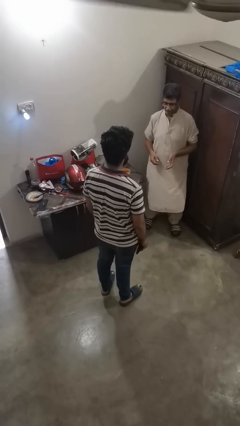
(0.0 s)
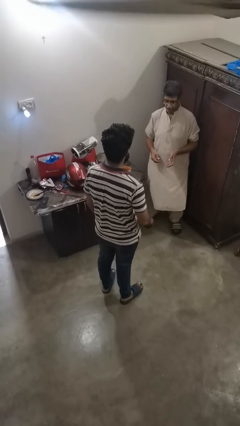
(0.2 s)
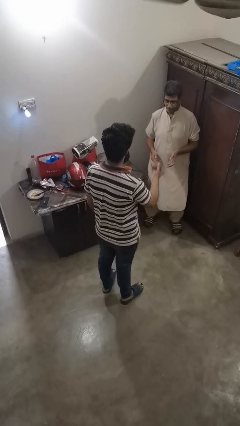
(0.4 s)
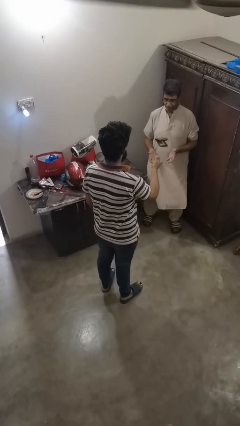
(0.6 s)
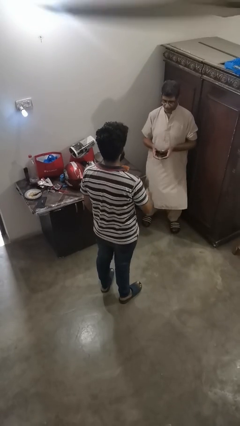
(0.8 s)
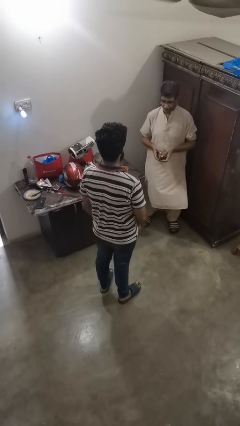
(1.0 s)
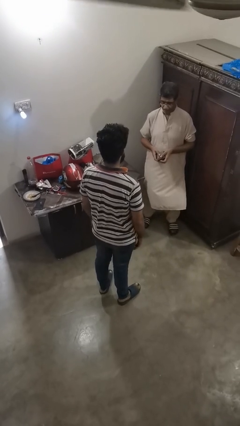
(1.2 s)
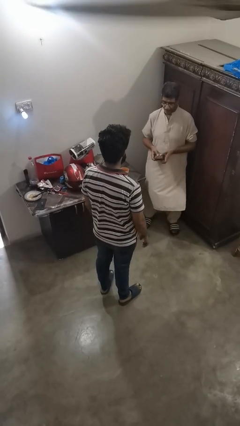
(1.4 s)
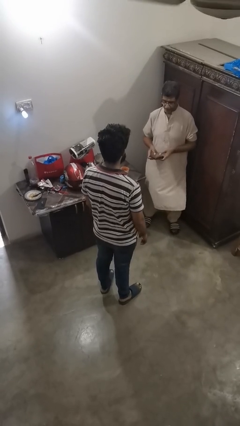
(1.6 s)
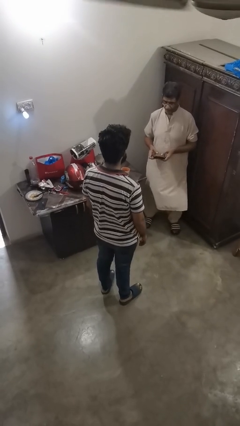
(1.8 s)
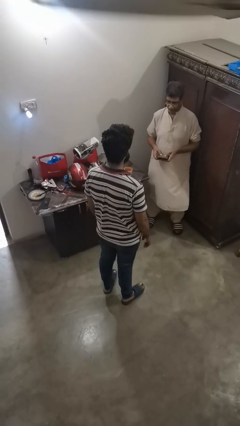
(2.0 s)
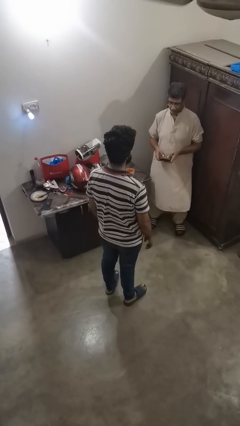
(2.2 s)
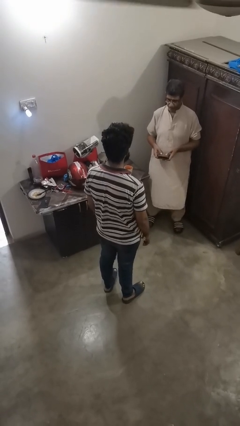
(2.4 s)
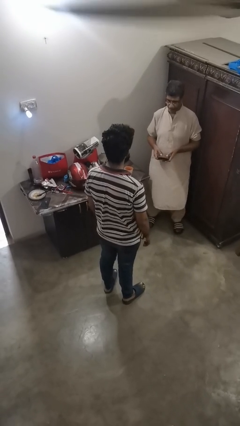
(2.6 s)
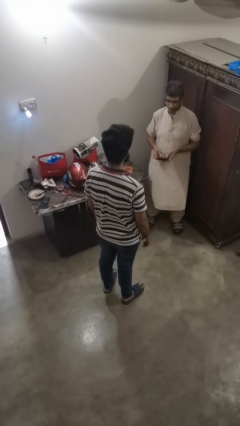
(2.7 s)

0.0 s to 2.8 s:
person throws object to person

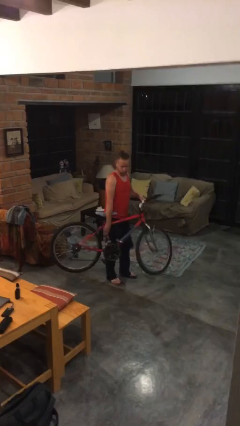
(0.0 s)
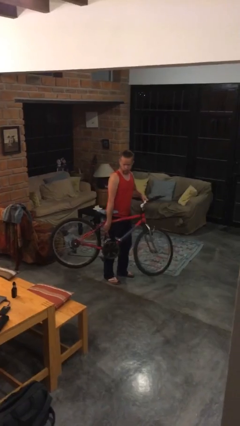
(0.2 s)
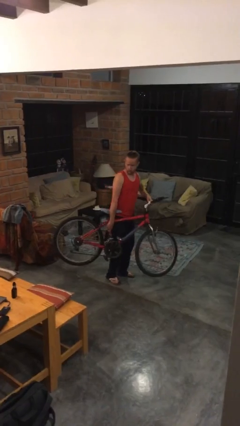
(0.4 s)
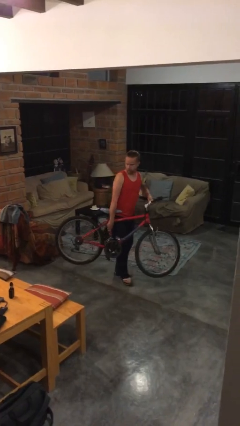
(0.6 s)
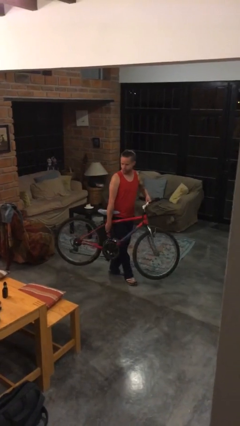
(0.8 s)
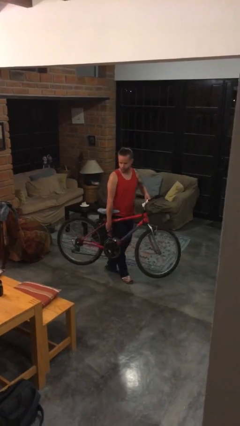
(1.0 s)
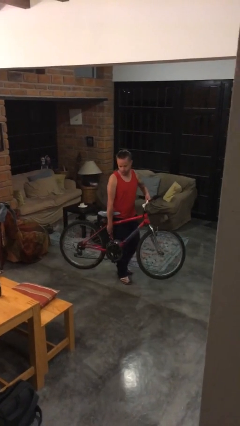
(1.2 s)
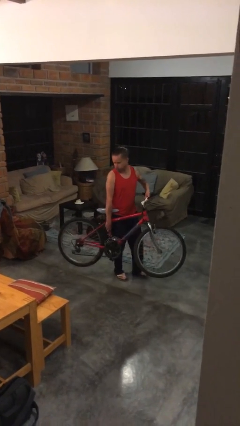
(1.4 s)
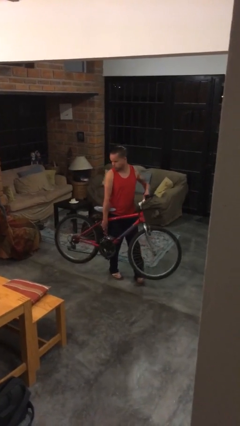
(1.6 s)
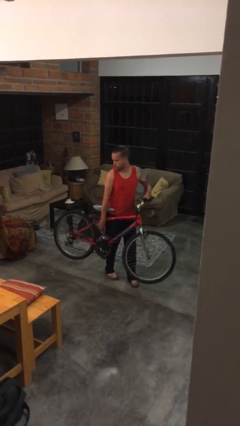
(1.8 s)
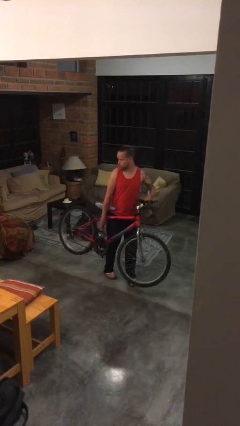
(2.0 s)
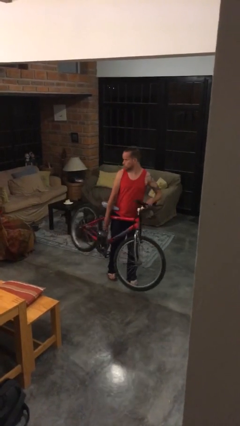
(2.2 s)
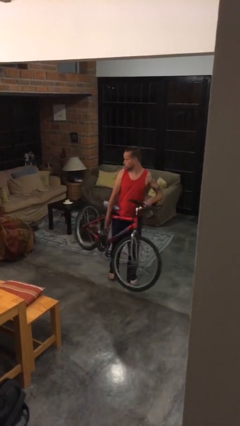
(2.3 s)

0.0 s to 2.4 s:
person carries bicycle

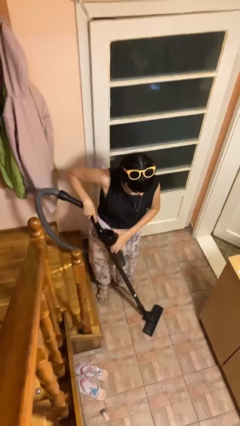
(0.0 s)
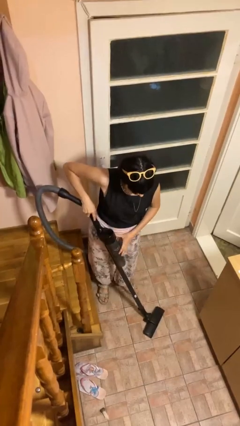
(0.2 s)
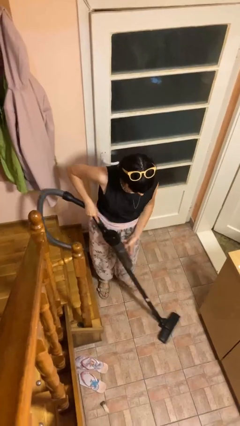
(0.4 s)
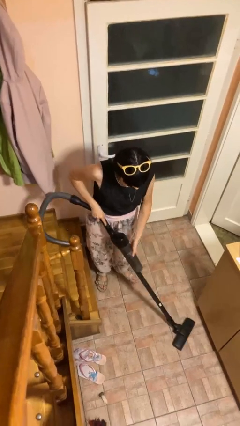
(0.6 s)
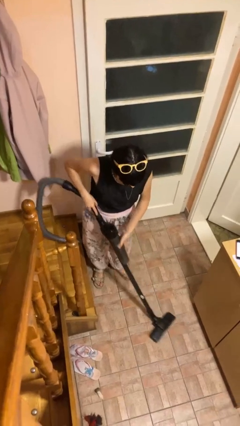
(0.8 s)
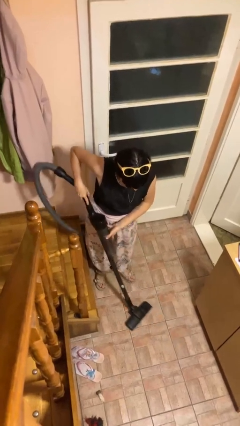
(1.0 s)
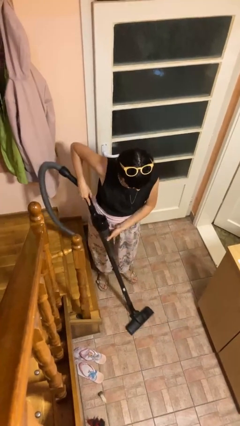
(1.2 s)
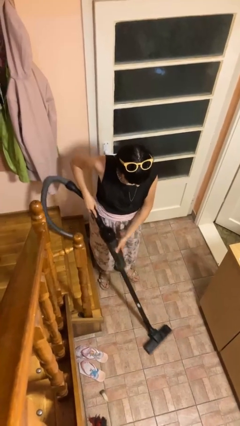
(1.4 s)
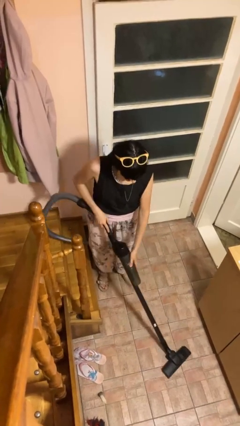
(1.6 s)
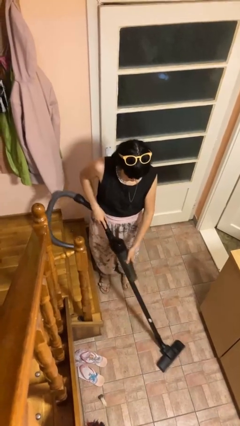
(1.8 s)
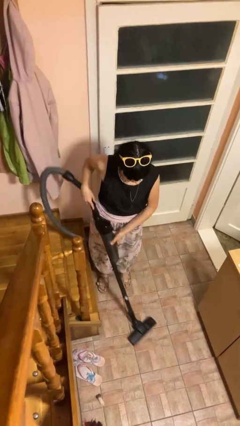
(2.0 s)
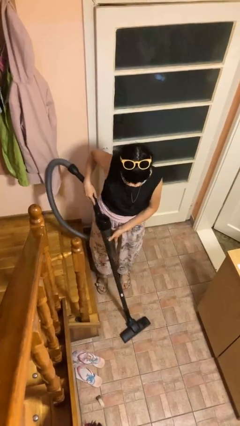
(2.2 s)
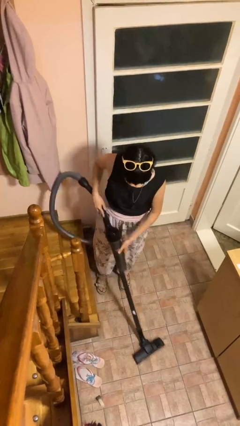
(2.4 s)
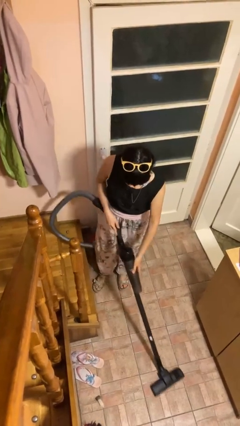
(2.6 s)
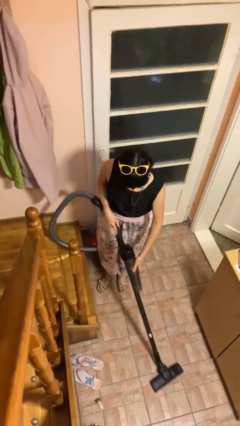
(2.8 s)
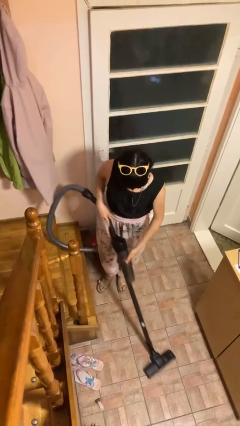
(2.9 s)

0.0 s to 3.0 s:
person vacuums carpet

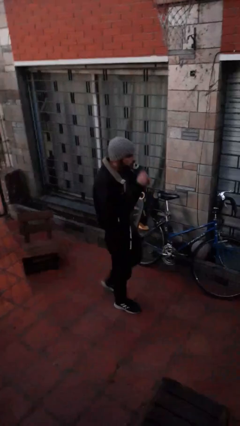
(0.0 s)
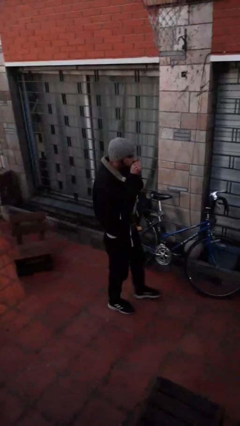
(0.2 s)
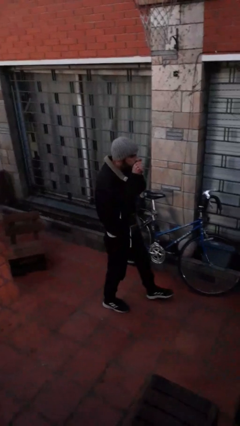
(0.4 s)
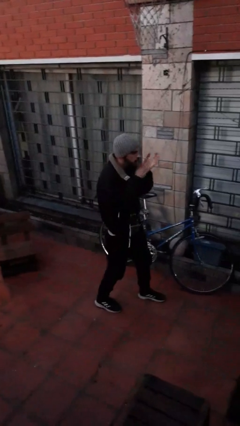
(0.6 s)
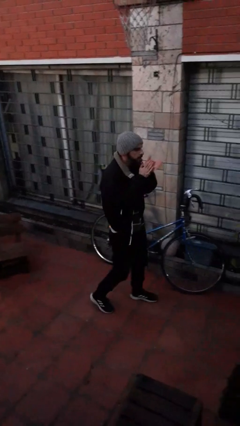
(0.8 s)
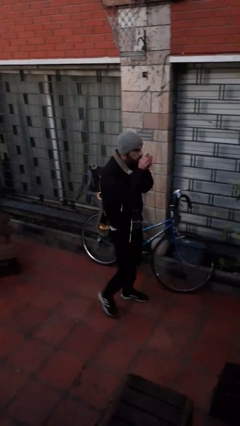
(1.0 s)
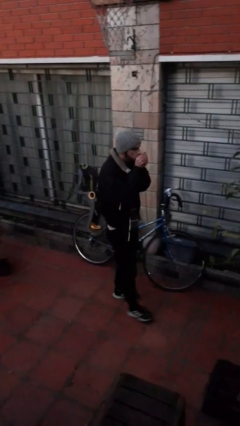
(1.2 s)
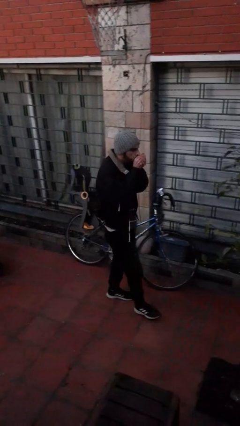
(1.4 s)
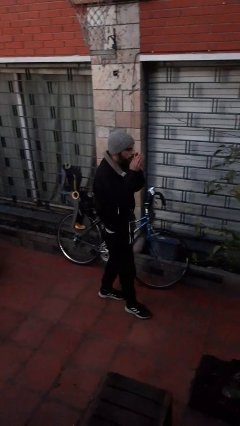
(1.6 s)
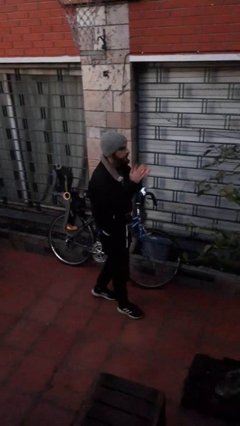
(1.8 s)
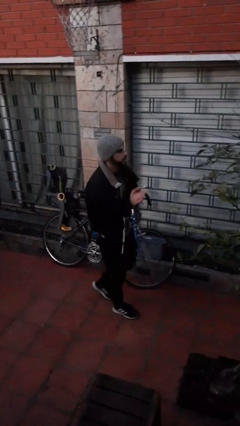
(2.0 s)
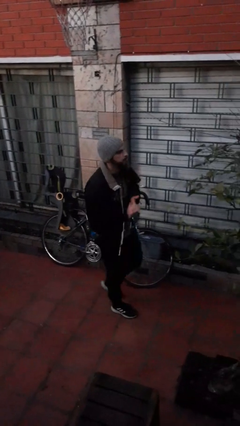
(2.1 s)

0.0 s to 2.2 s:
person blows into hands

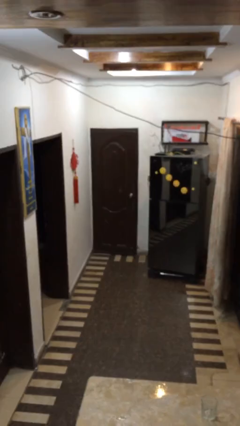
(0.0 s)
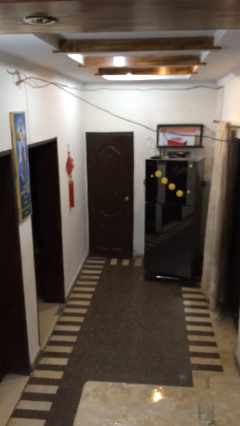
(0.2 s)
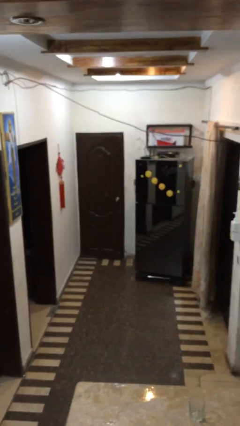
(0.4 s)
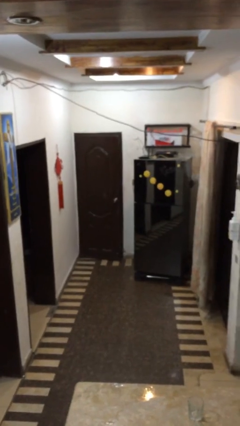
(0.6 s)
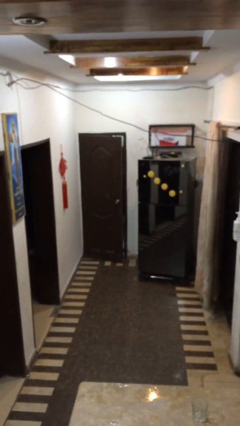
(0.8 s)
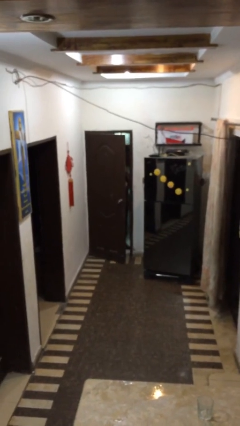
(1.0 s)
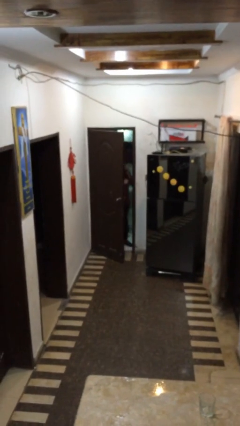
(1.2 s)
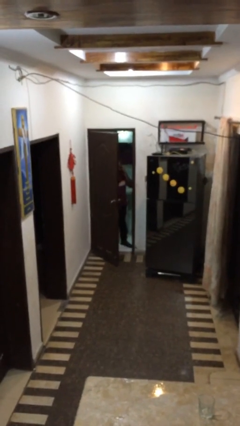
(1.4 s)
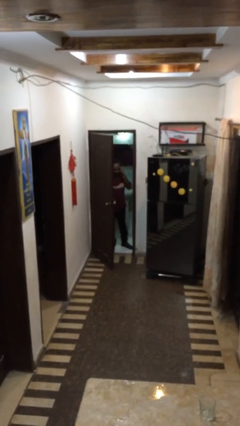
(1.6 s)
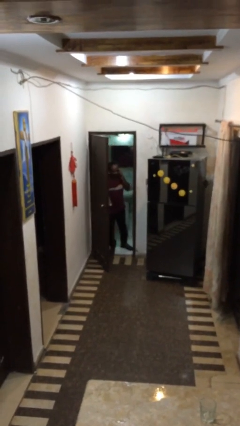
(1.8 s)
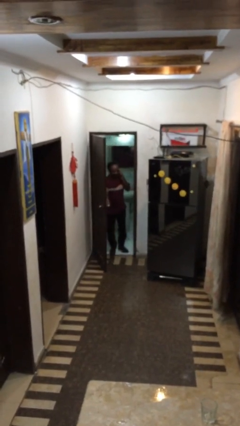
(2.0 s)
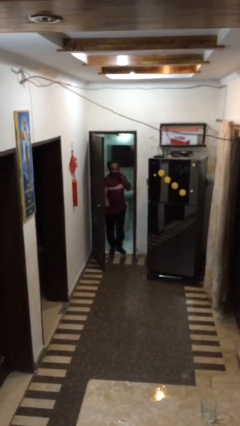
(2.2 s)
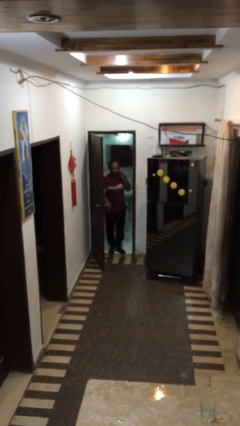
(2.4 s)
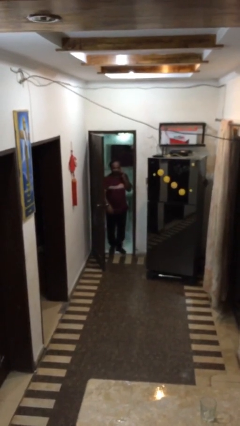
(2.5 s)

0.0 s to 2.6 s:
person opens facility door

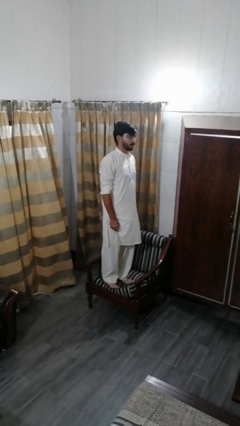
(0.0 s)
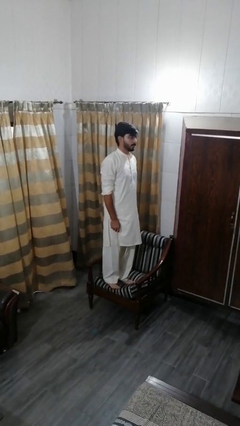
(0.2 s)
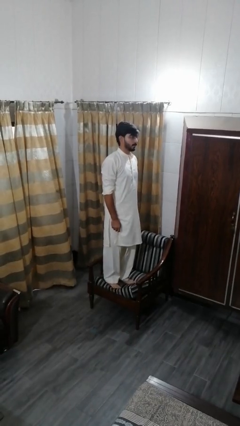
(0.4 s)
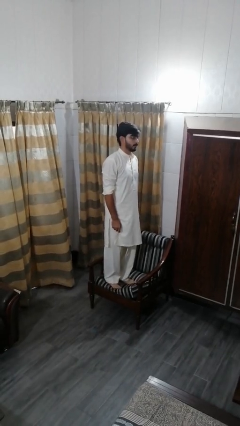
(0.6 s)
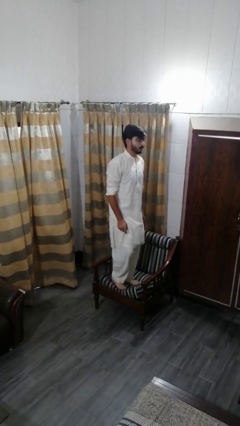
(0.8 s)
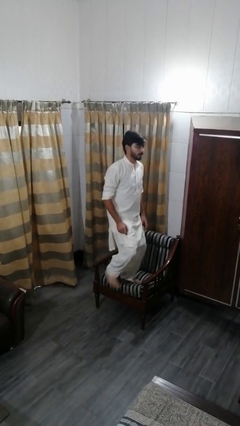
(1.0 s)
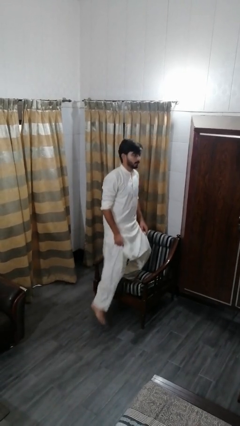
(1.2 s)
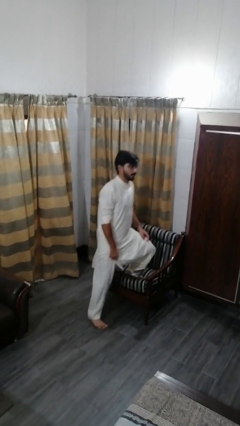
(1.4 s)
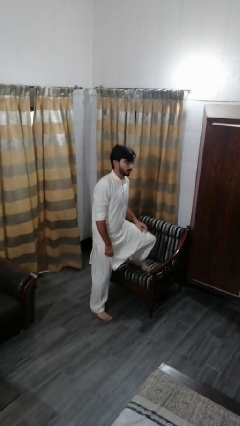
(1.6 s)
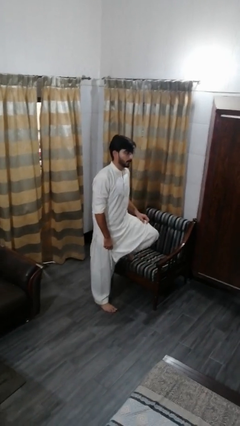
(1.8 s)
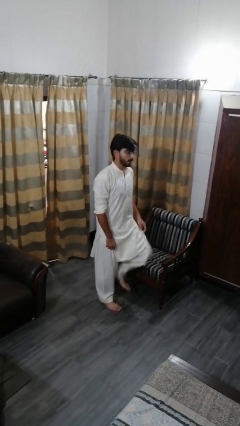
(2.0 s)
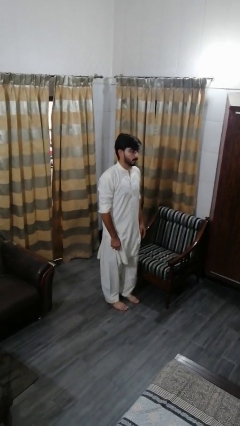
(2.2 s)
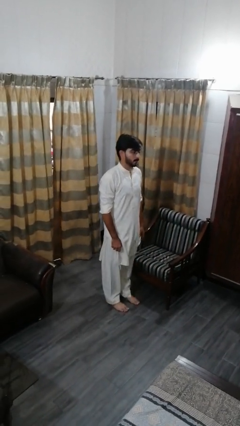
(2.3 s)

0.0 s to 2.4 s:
person climbs off chair

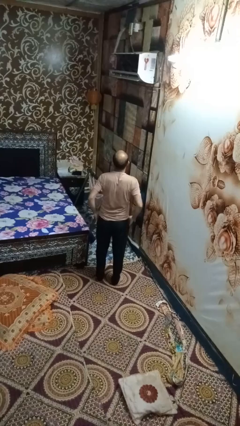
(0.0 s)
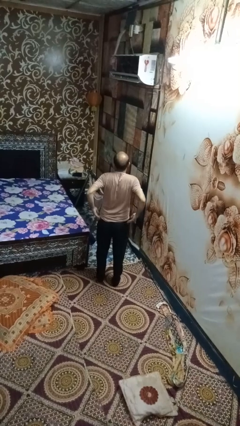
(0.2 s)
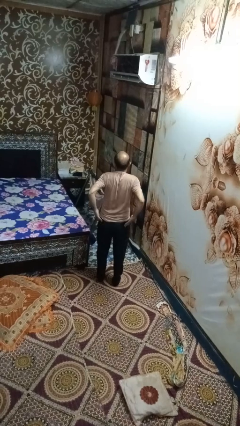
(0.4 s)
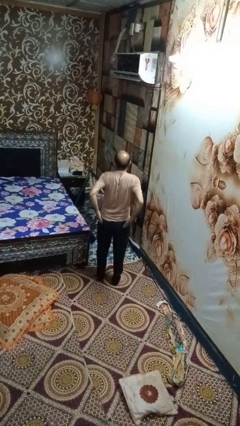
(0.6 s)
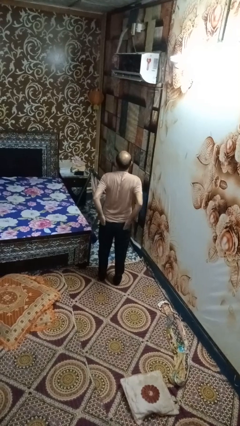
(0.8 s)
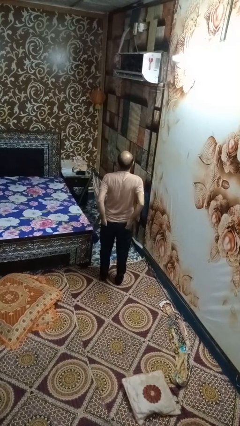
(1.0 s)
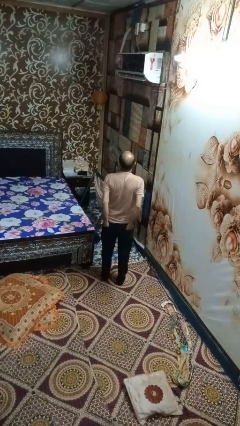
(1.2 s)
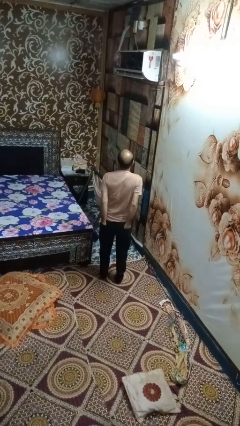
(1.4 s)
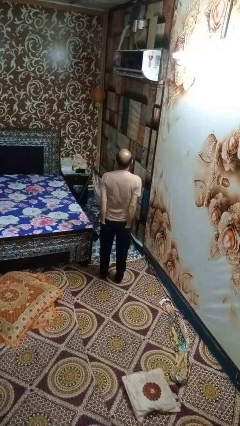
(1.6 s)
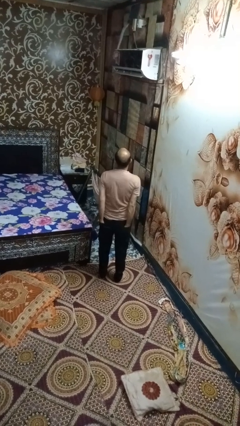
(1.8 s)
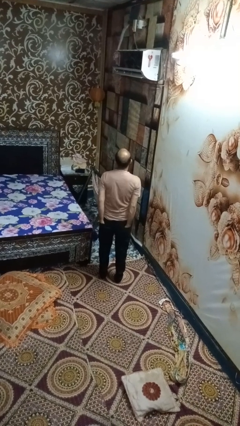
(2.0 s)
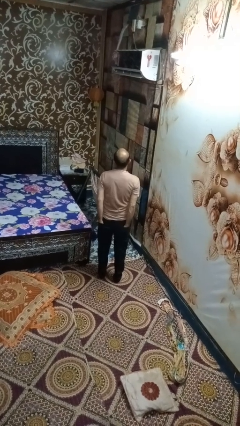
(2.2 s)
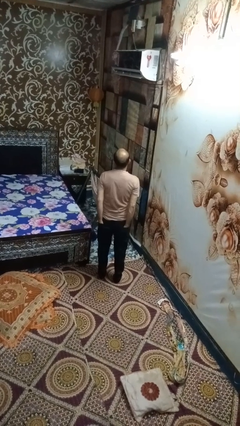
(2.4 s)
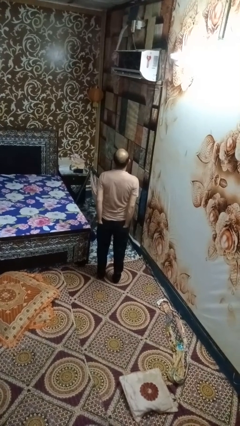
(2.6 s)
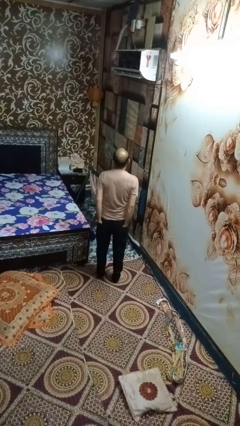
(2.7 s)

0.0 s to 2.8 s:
person puts hands in back pockets
